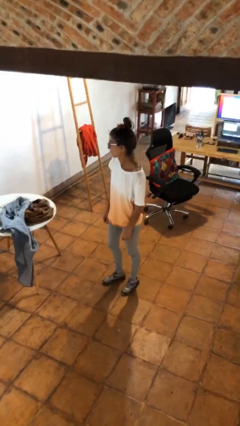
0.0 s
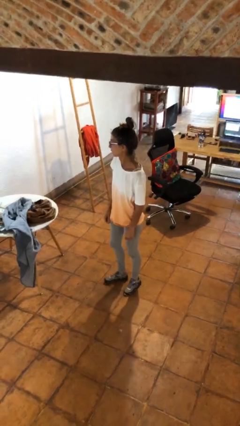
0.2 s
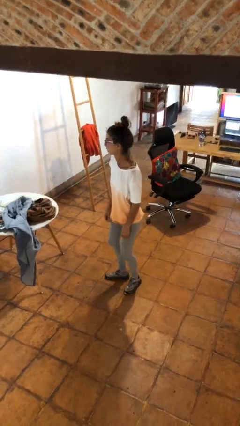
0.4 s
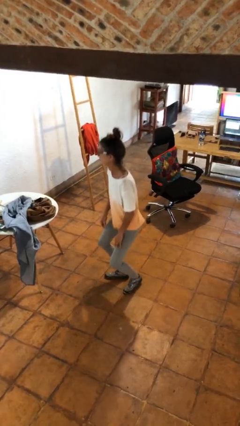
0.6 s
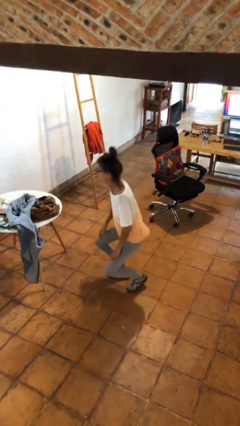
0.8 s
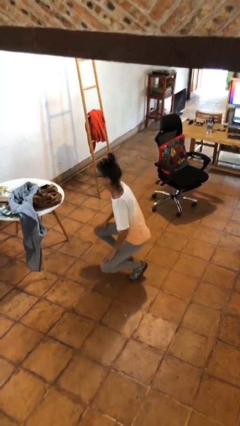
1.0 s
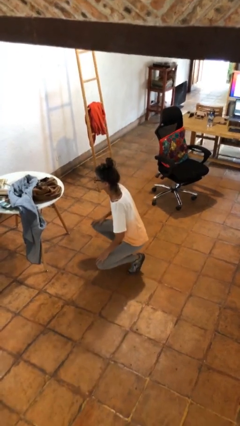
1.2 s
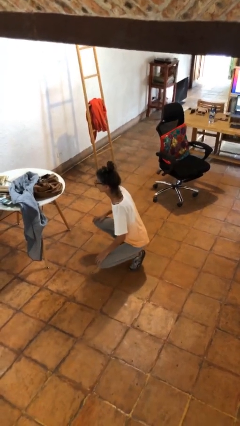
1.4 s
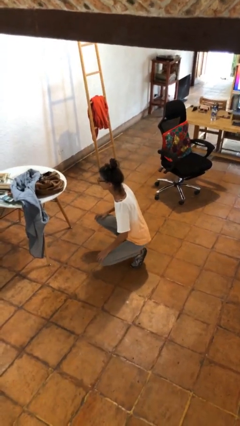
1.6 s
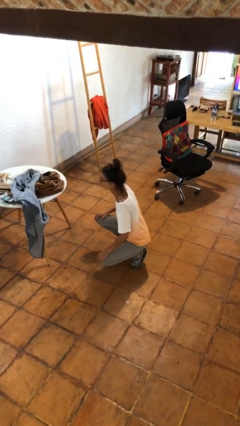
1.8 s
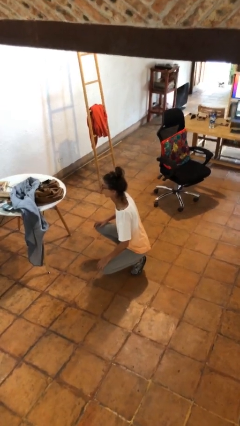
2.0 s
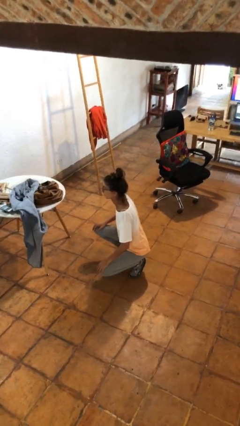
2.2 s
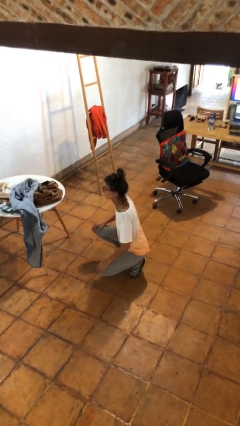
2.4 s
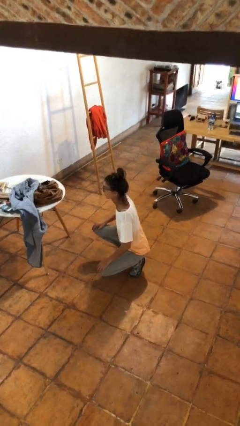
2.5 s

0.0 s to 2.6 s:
person squats

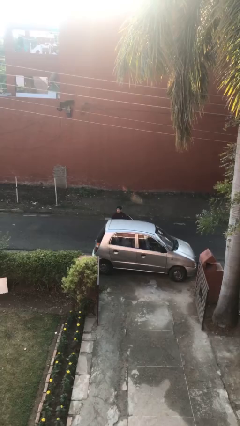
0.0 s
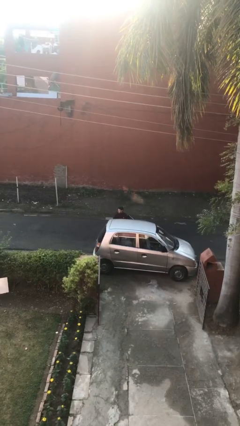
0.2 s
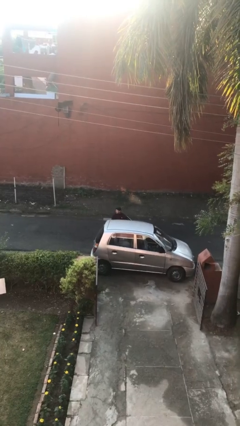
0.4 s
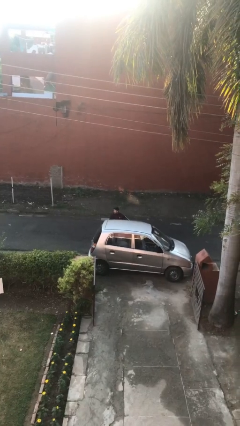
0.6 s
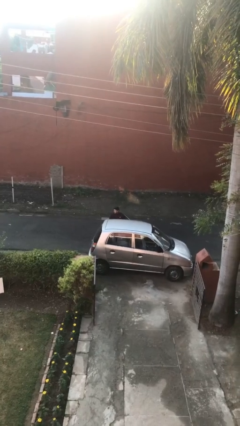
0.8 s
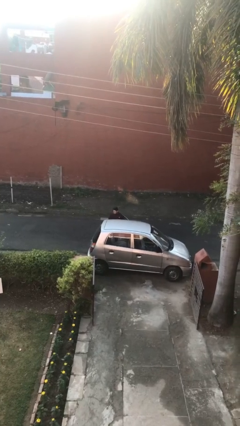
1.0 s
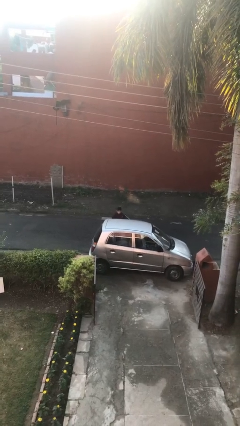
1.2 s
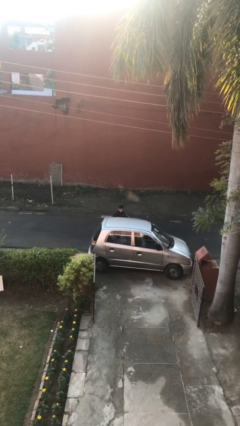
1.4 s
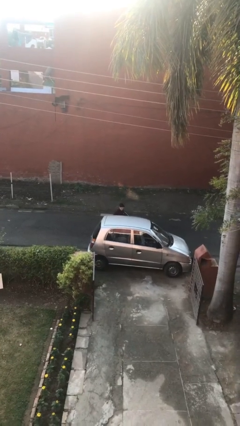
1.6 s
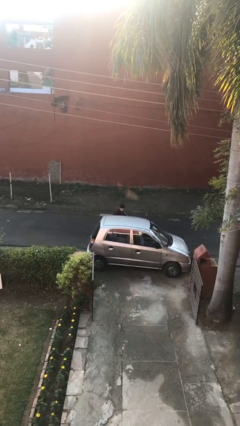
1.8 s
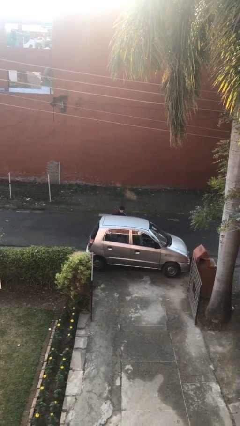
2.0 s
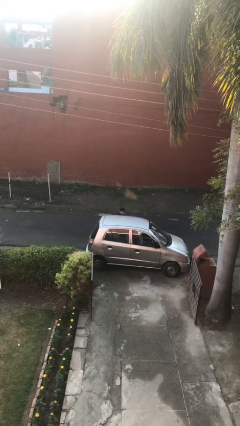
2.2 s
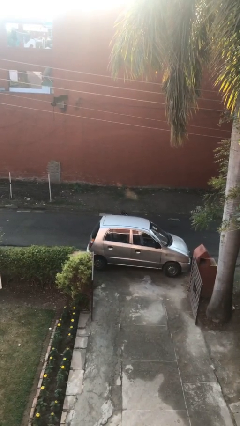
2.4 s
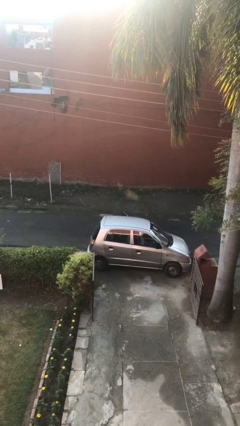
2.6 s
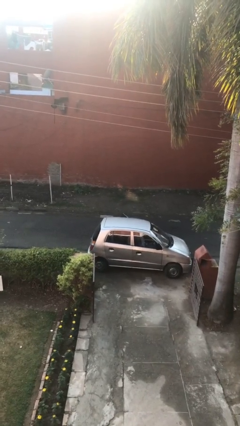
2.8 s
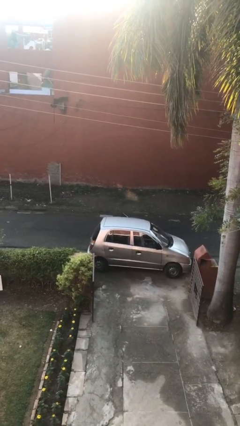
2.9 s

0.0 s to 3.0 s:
person enters car

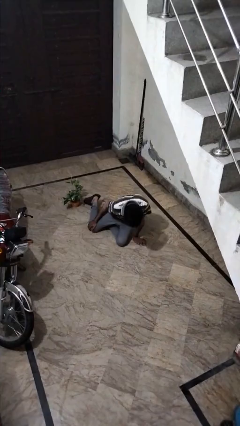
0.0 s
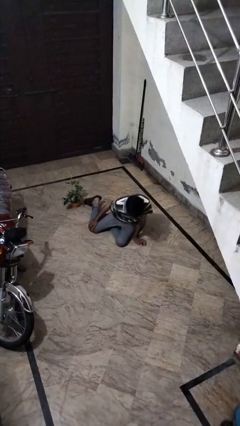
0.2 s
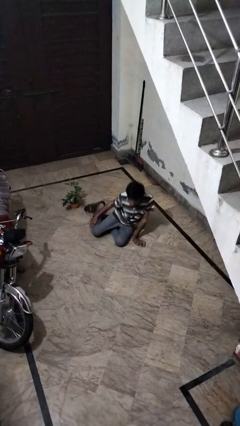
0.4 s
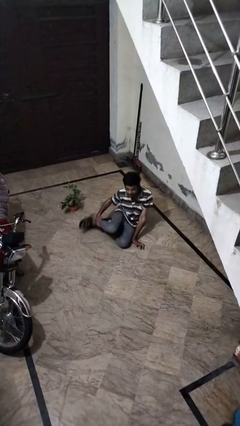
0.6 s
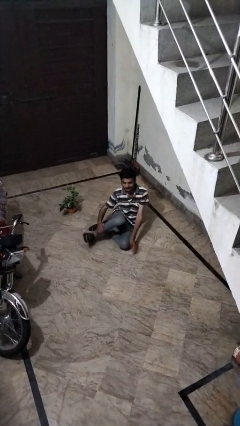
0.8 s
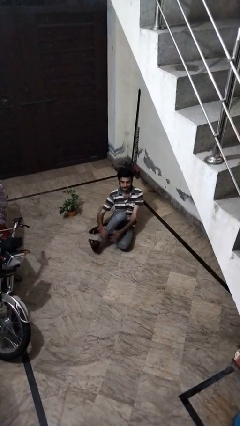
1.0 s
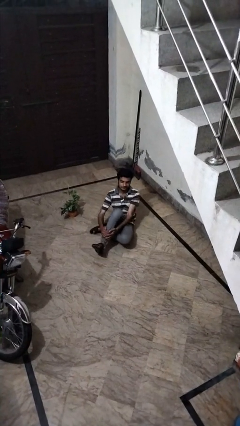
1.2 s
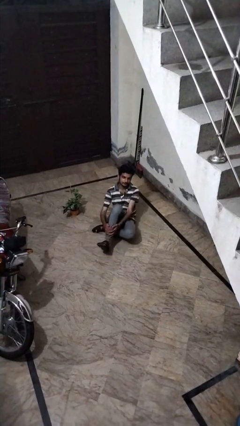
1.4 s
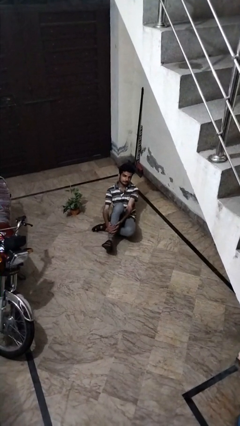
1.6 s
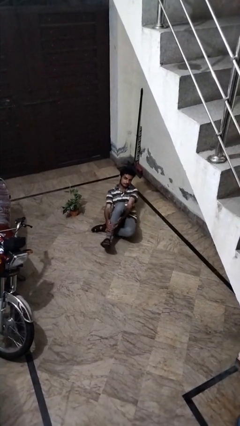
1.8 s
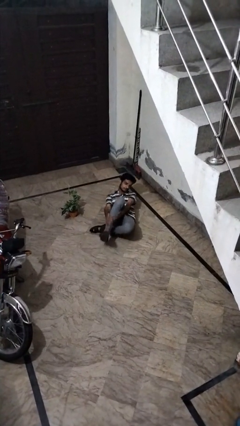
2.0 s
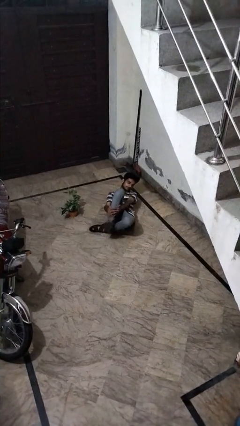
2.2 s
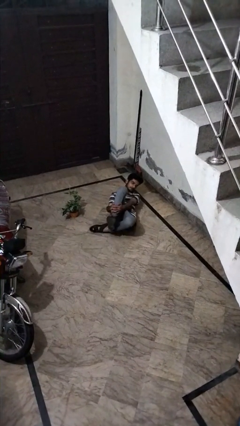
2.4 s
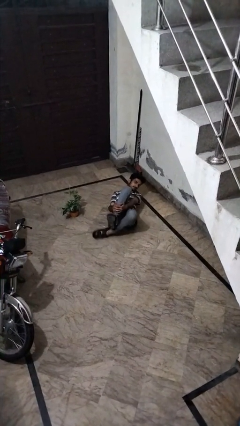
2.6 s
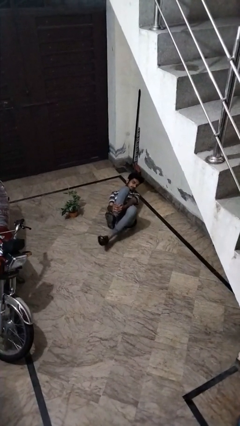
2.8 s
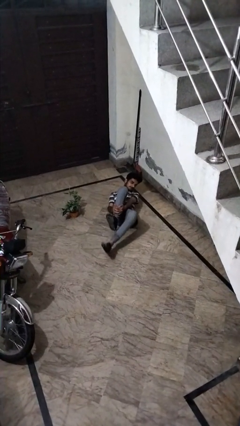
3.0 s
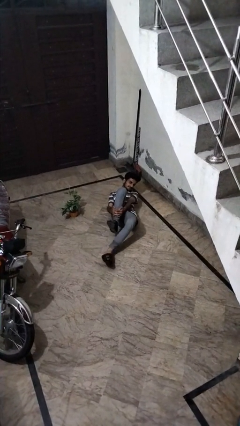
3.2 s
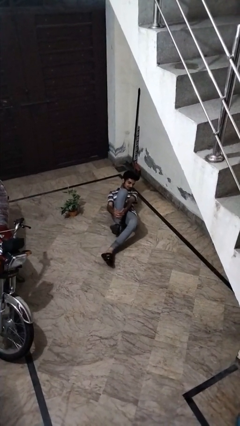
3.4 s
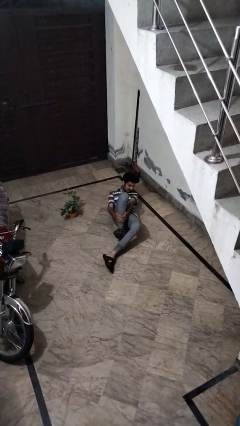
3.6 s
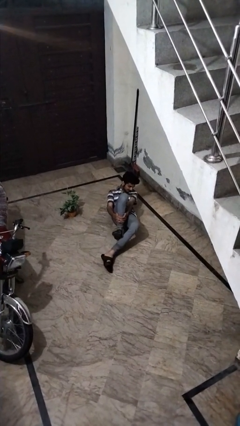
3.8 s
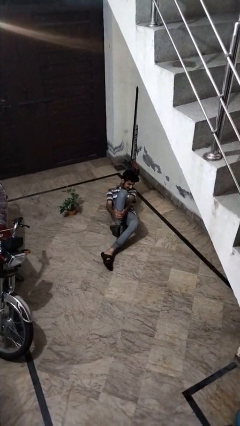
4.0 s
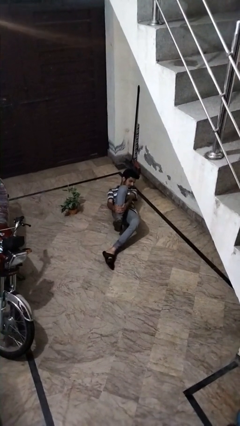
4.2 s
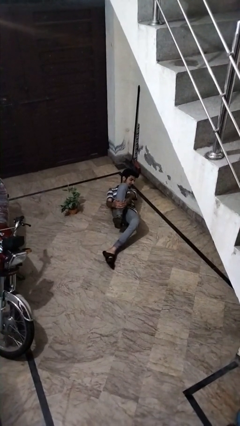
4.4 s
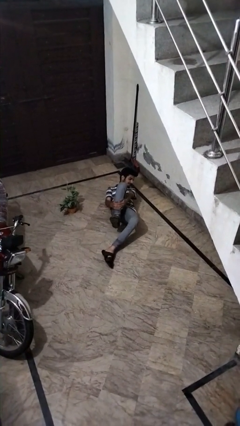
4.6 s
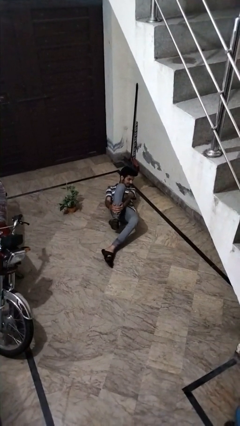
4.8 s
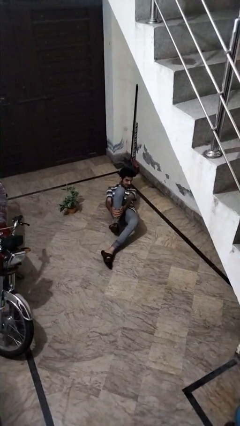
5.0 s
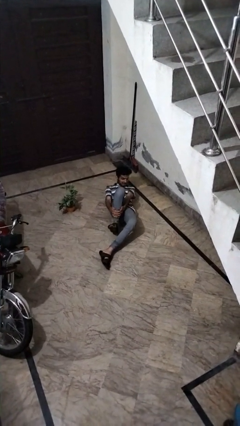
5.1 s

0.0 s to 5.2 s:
person lies down on floor

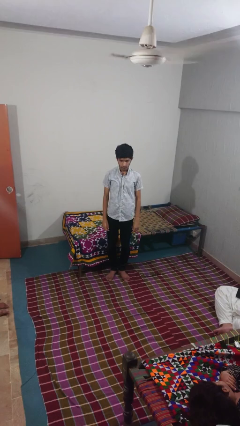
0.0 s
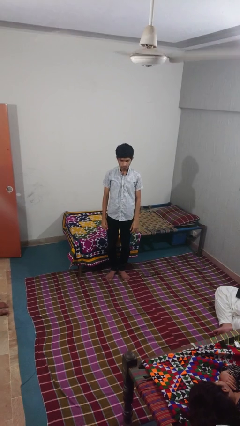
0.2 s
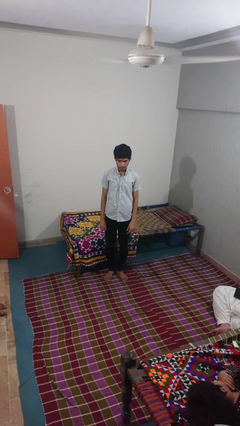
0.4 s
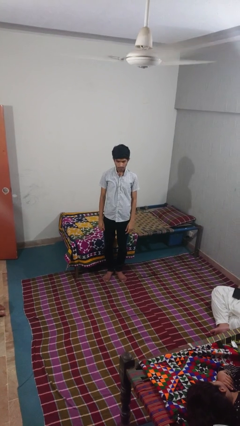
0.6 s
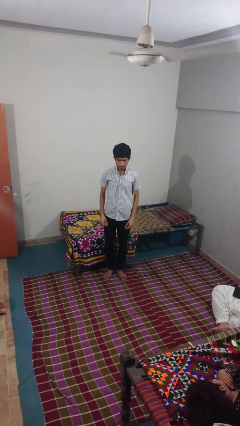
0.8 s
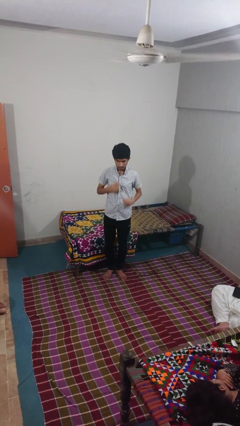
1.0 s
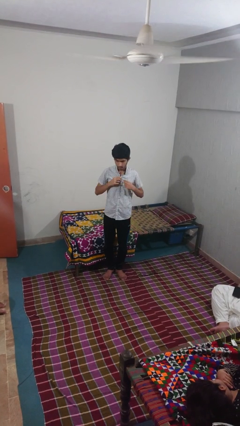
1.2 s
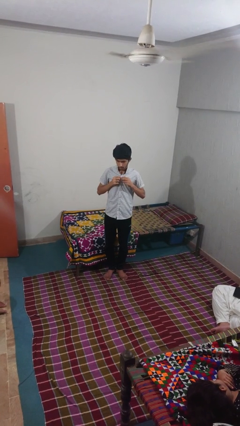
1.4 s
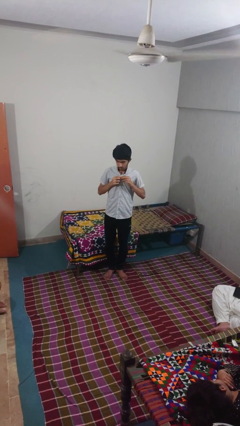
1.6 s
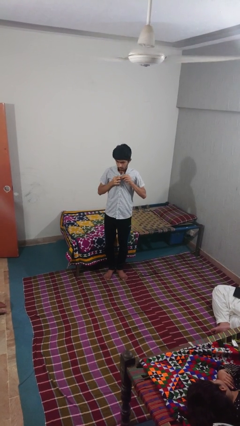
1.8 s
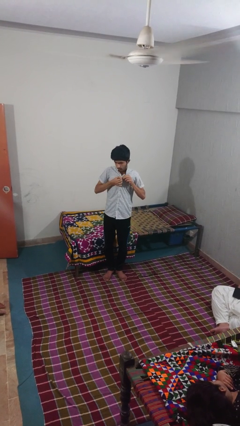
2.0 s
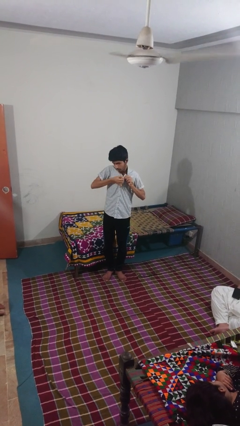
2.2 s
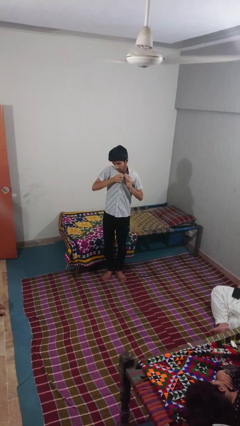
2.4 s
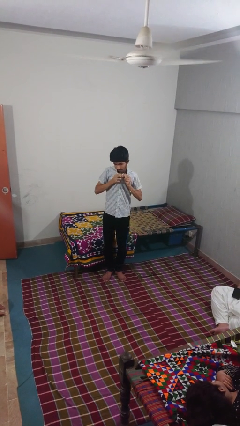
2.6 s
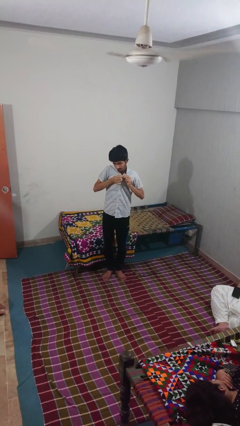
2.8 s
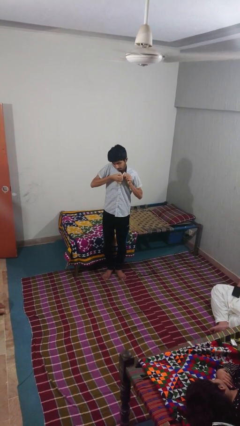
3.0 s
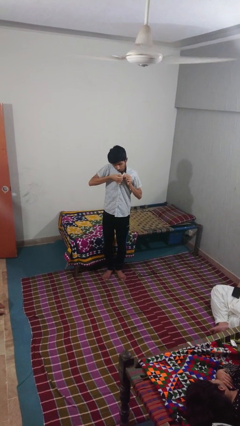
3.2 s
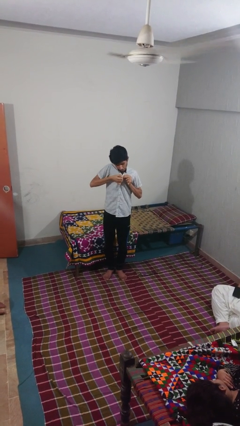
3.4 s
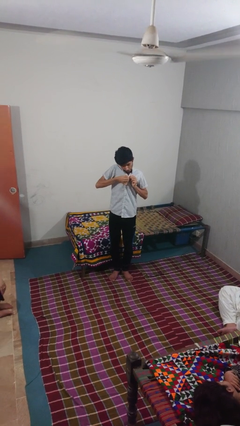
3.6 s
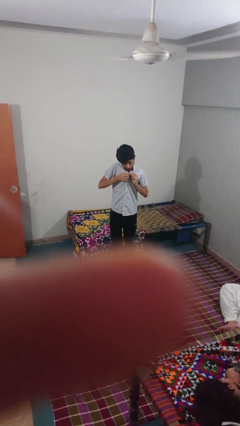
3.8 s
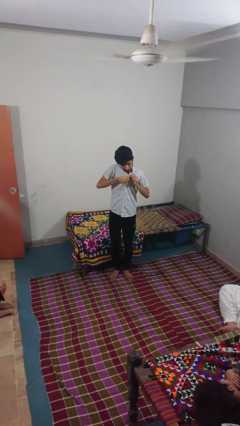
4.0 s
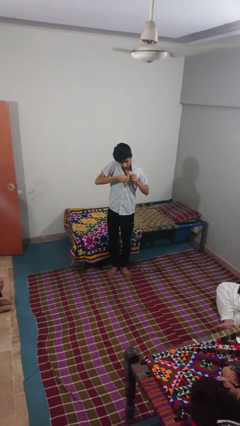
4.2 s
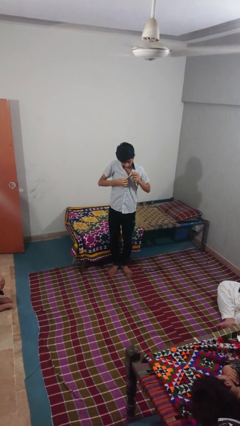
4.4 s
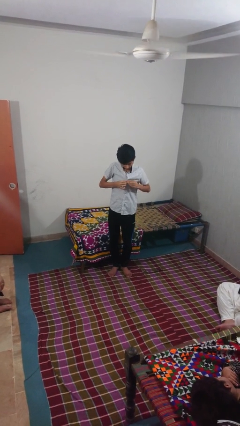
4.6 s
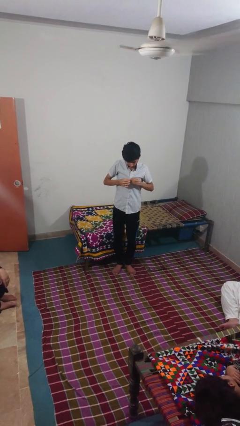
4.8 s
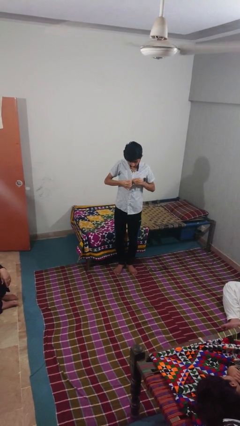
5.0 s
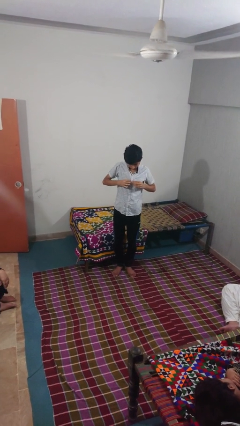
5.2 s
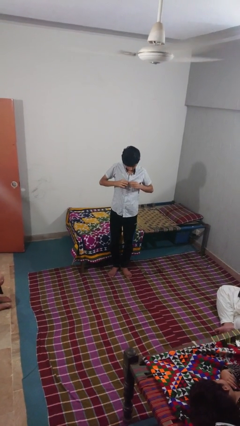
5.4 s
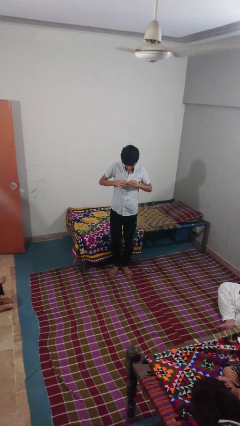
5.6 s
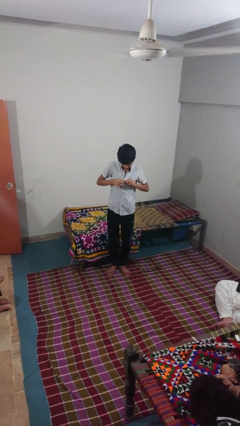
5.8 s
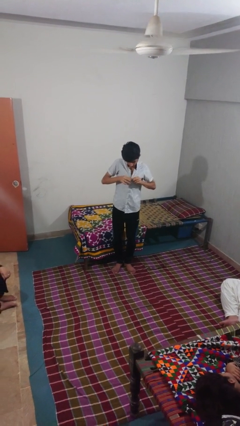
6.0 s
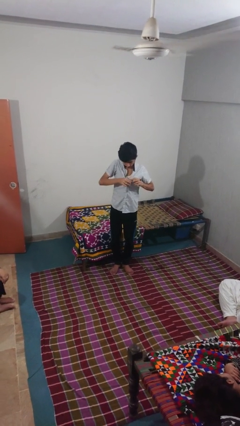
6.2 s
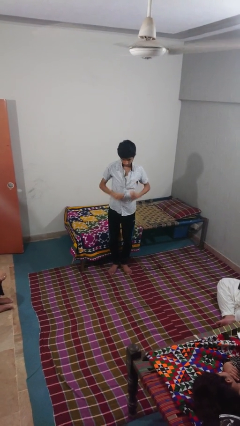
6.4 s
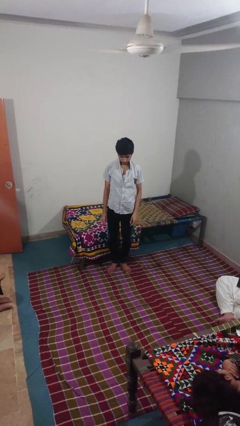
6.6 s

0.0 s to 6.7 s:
person unbuttons shirt
